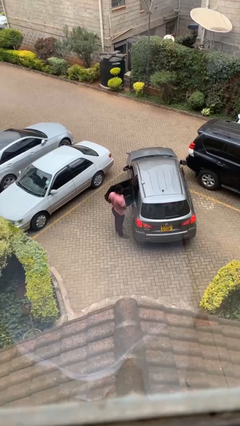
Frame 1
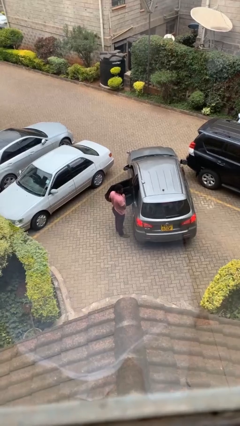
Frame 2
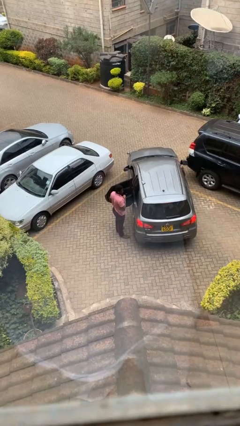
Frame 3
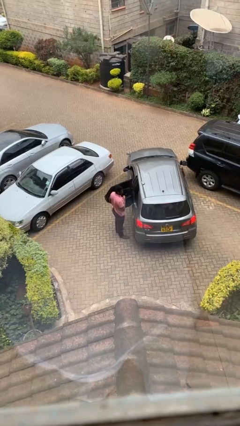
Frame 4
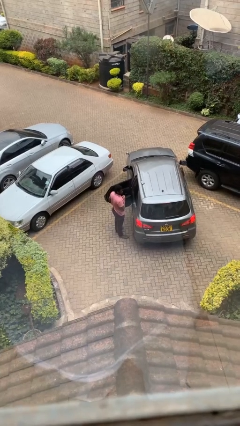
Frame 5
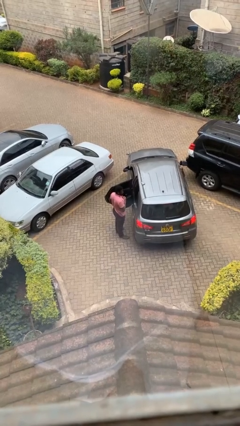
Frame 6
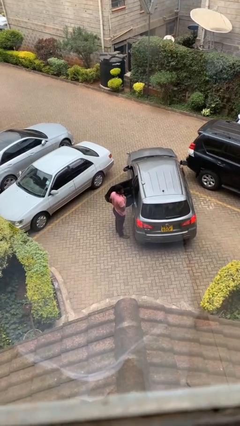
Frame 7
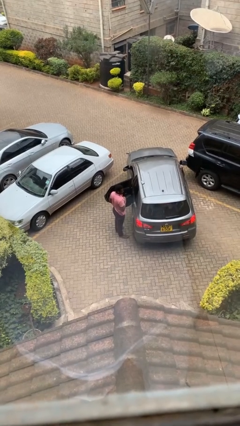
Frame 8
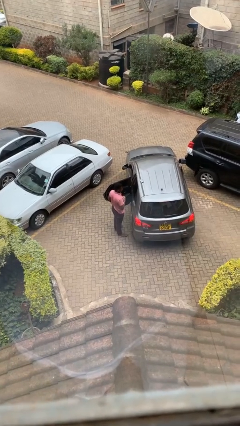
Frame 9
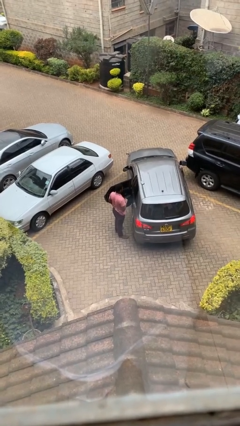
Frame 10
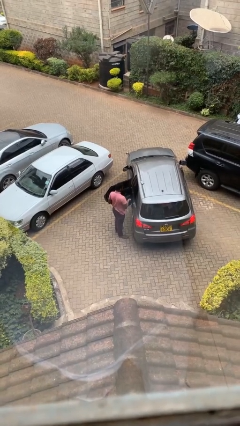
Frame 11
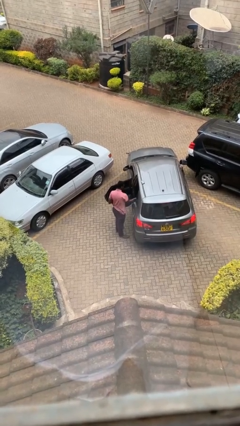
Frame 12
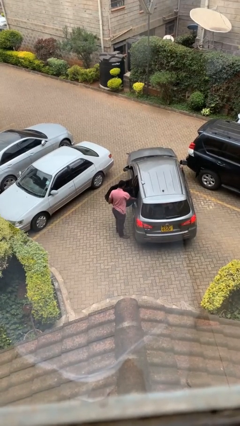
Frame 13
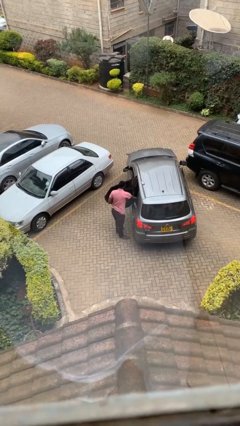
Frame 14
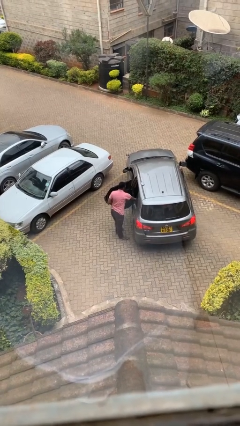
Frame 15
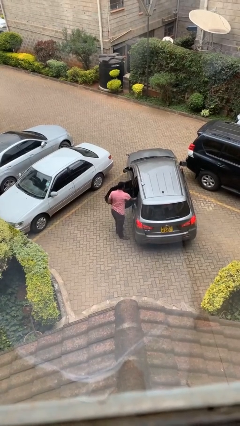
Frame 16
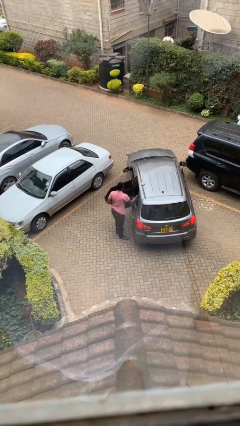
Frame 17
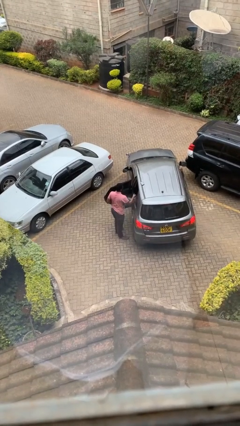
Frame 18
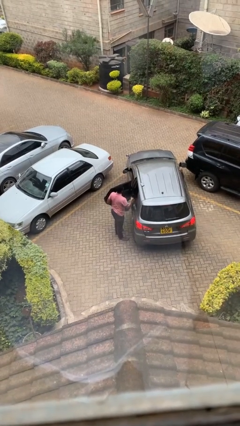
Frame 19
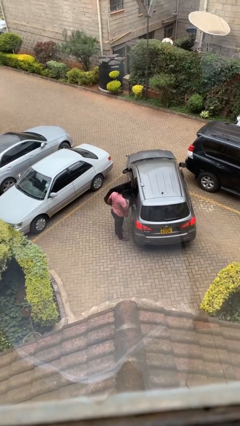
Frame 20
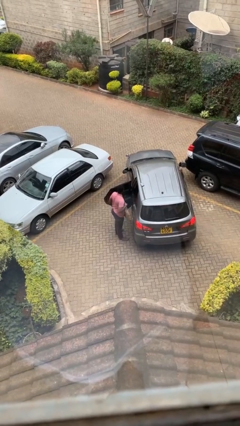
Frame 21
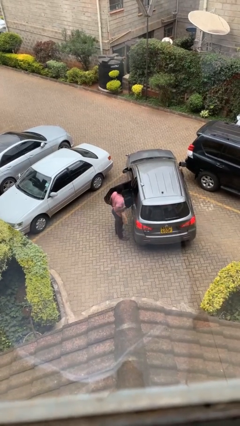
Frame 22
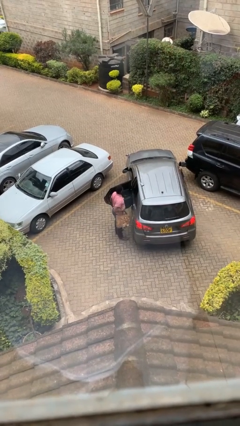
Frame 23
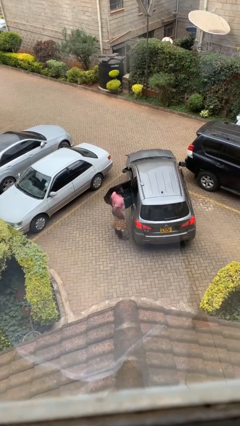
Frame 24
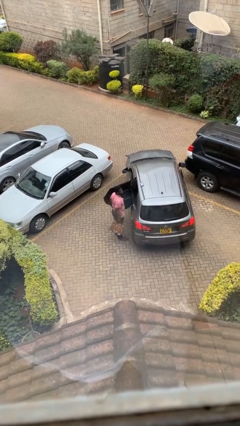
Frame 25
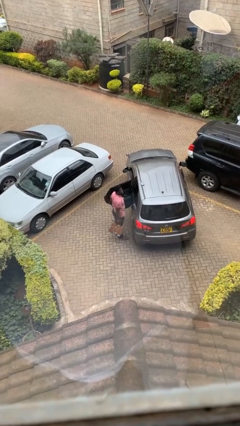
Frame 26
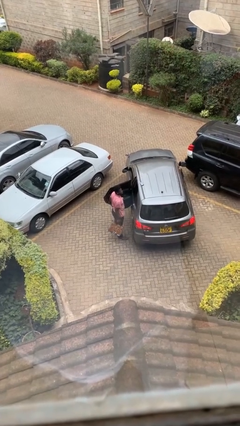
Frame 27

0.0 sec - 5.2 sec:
person unloads car

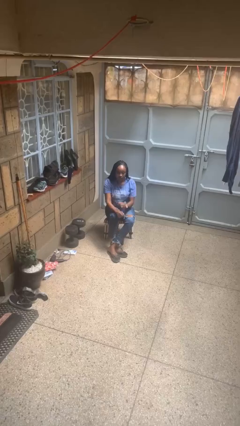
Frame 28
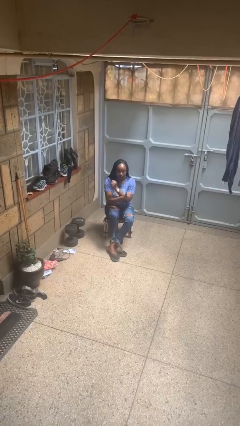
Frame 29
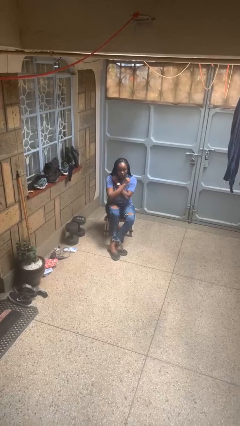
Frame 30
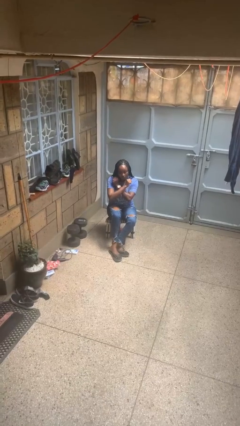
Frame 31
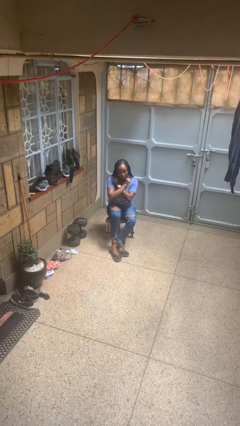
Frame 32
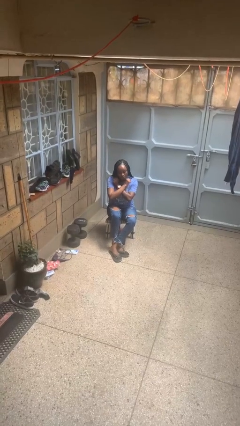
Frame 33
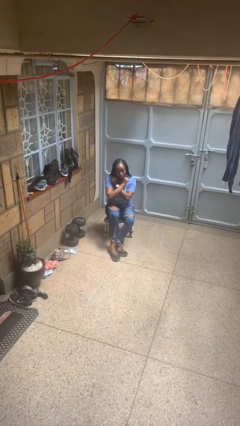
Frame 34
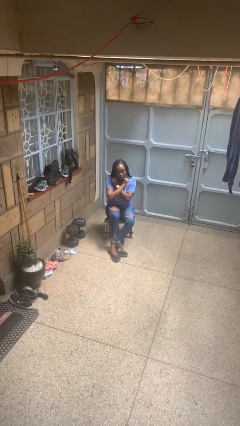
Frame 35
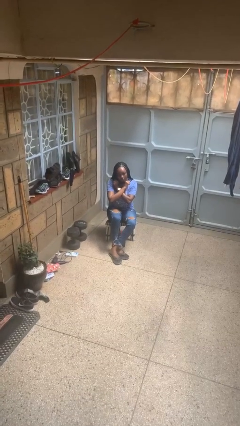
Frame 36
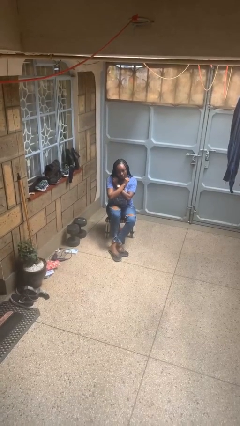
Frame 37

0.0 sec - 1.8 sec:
person gestures arms x

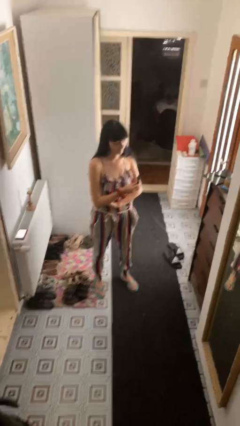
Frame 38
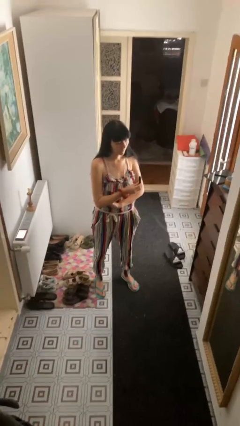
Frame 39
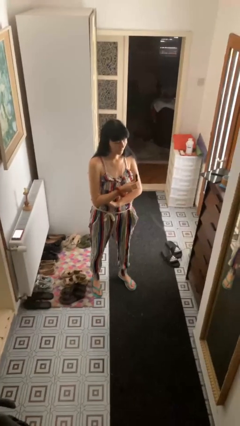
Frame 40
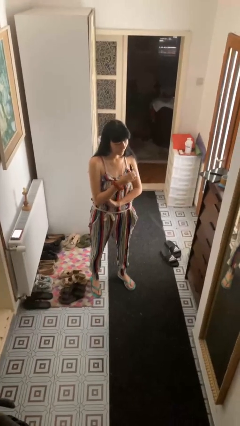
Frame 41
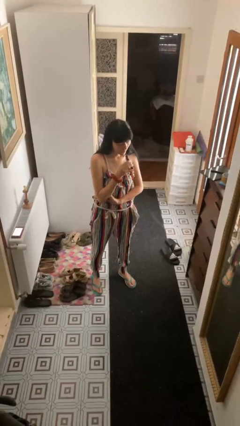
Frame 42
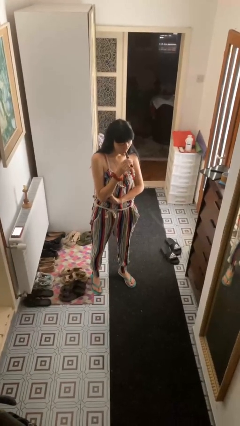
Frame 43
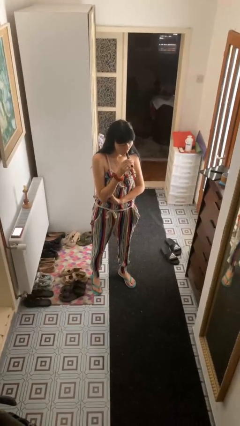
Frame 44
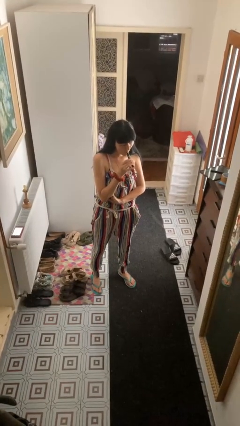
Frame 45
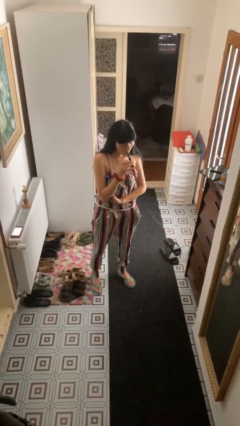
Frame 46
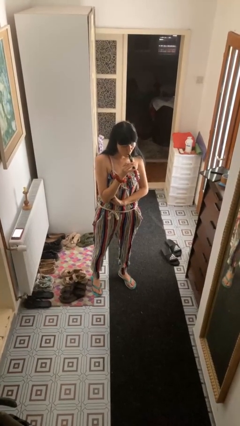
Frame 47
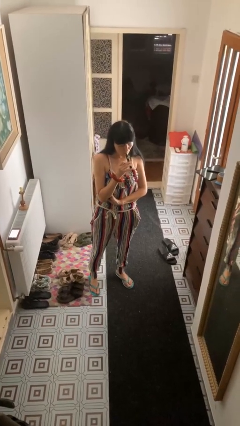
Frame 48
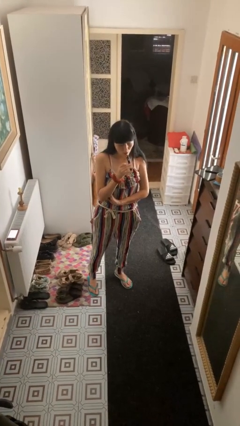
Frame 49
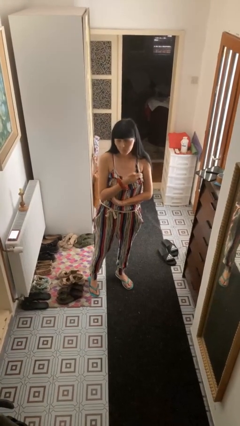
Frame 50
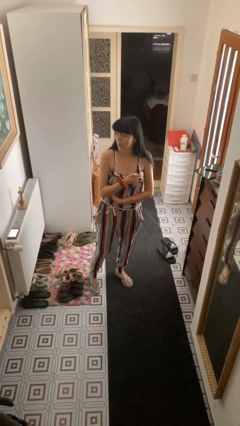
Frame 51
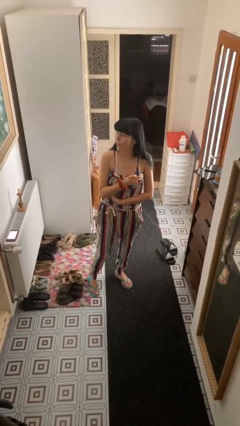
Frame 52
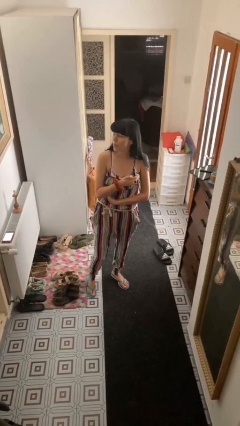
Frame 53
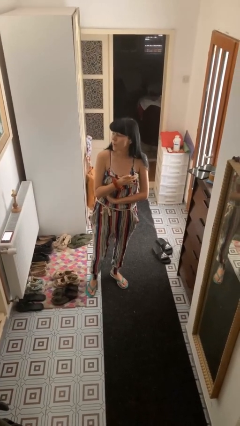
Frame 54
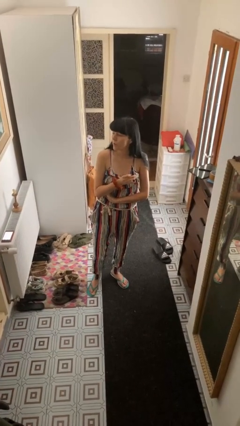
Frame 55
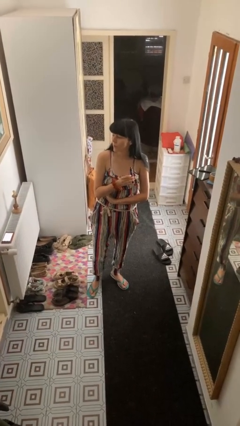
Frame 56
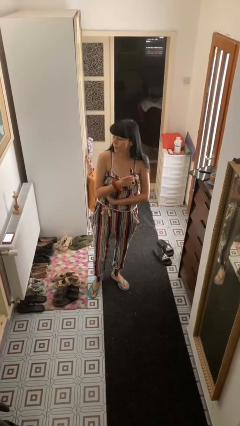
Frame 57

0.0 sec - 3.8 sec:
person vapes

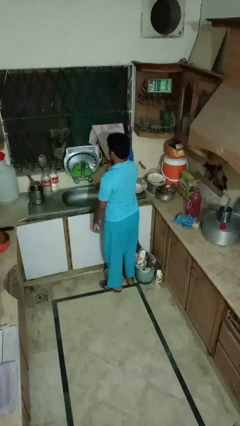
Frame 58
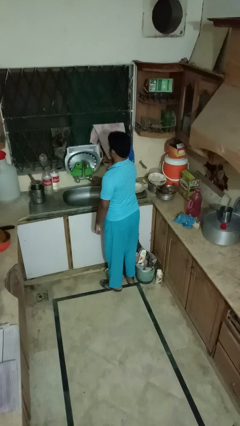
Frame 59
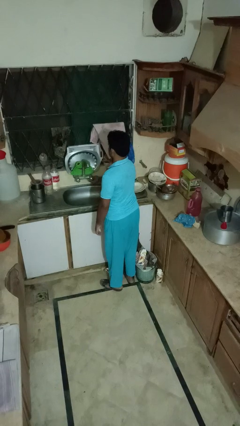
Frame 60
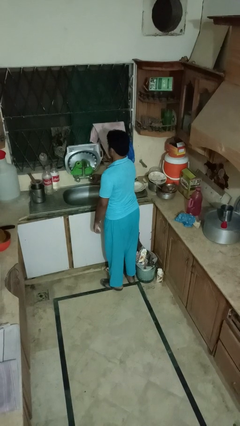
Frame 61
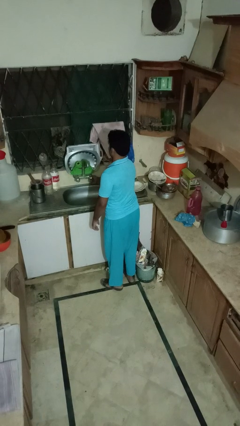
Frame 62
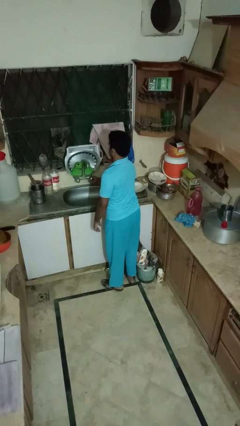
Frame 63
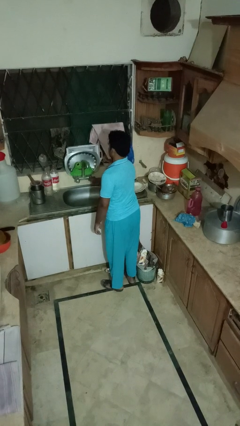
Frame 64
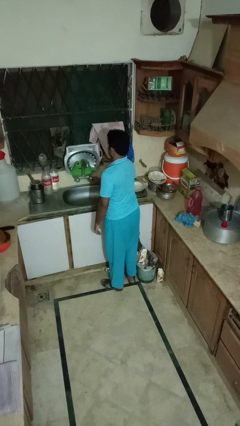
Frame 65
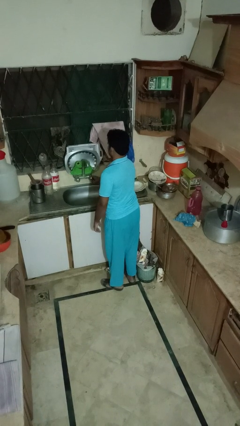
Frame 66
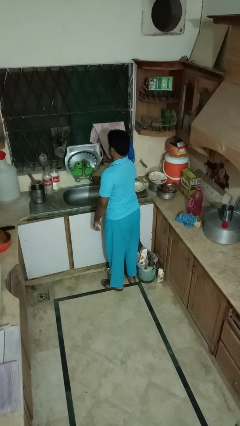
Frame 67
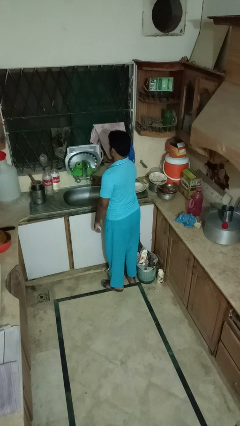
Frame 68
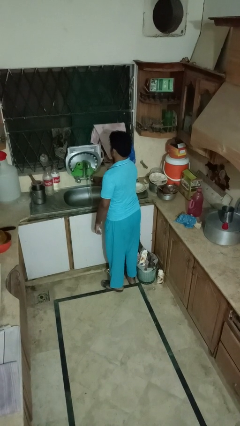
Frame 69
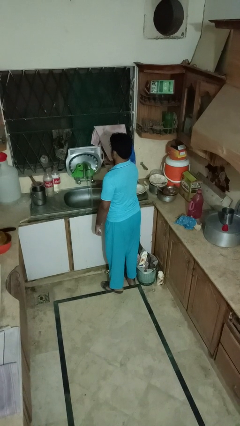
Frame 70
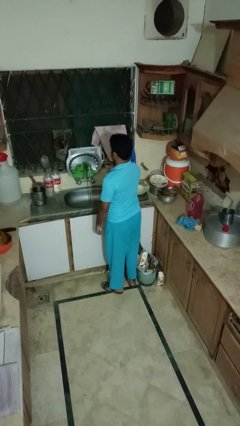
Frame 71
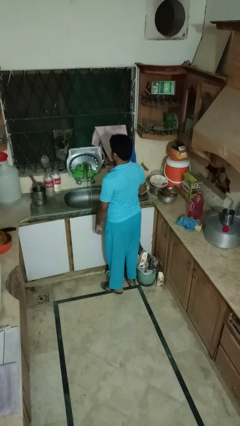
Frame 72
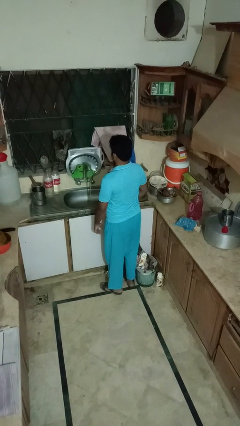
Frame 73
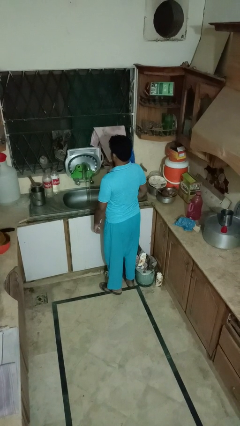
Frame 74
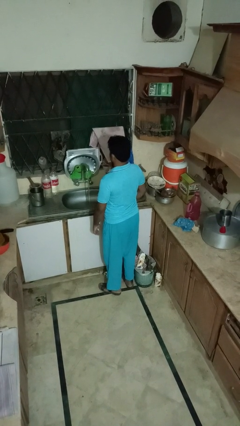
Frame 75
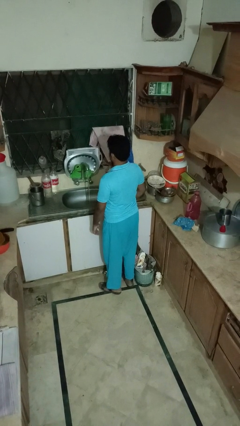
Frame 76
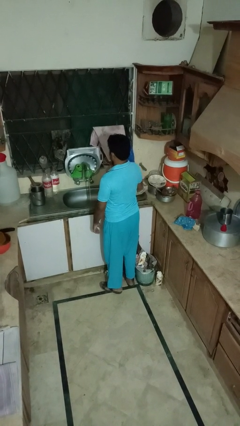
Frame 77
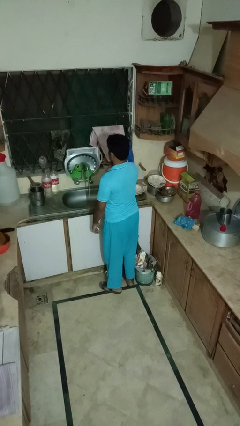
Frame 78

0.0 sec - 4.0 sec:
person turns on faucet

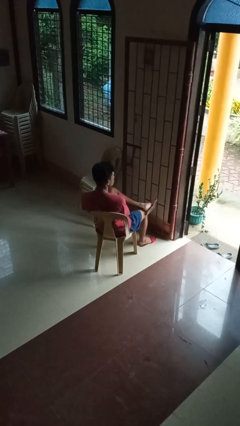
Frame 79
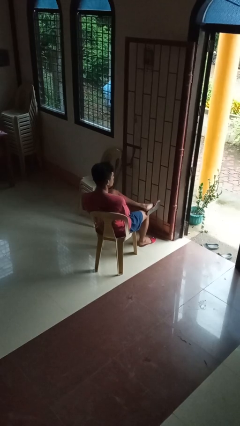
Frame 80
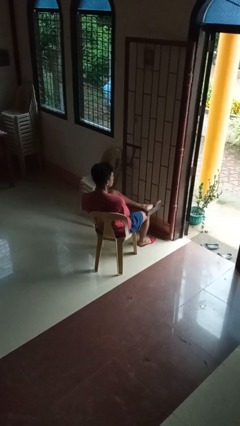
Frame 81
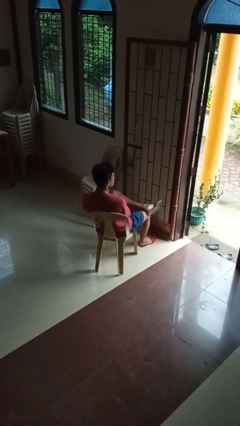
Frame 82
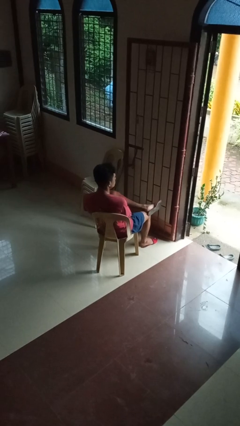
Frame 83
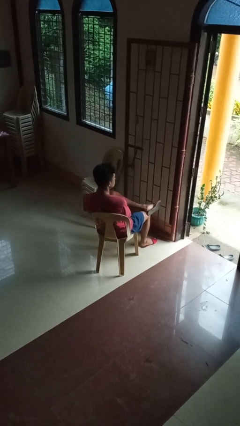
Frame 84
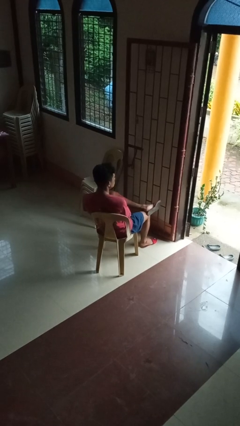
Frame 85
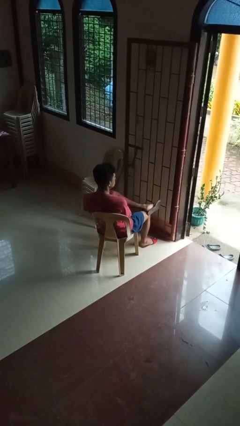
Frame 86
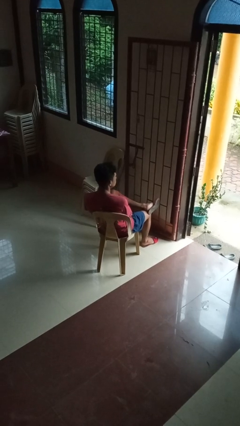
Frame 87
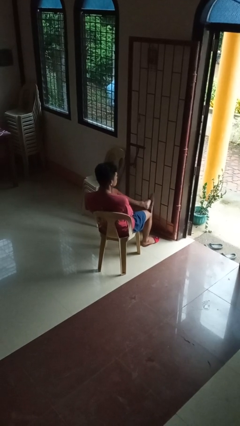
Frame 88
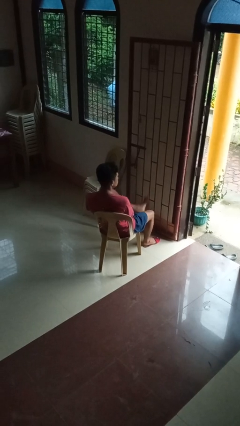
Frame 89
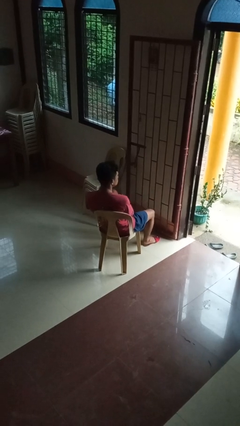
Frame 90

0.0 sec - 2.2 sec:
person crosses legs

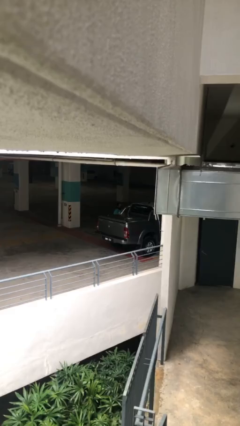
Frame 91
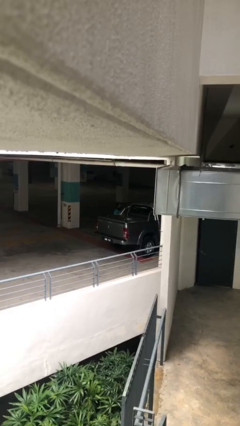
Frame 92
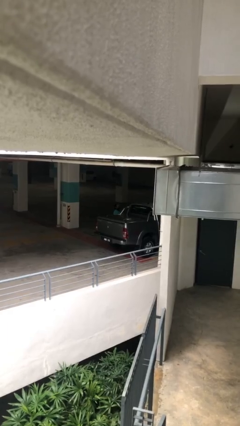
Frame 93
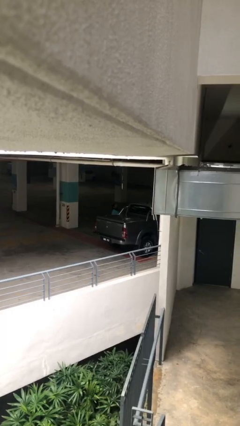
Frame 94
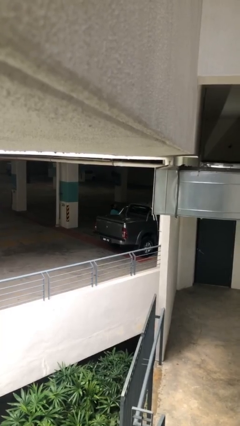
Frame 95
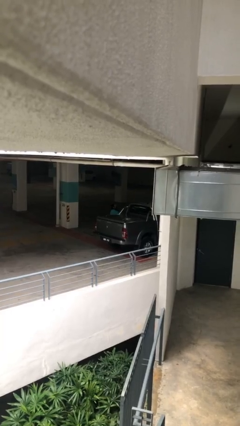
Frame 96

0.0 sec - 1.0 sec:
person closes car door
